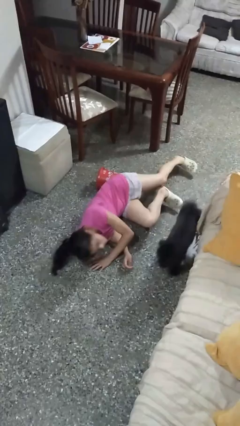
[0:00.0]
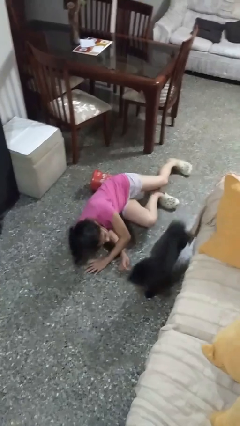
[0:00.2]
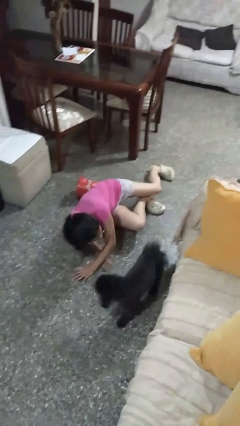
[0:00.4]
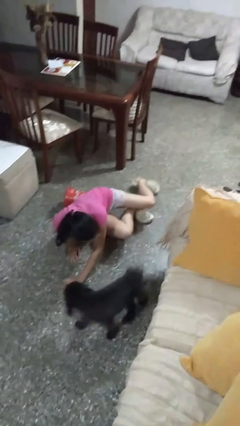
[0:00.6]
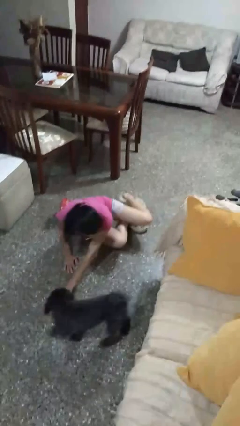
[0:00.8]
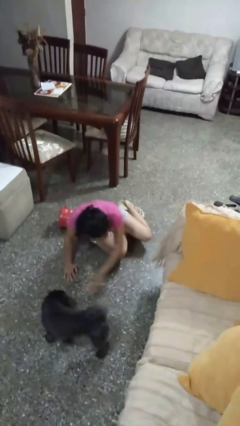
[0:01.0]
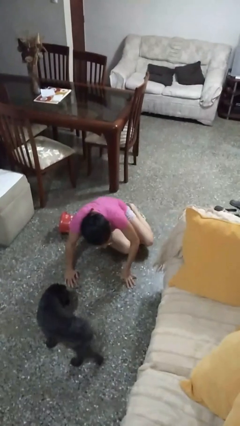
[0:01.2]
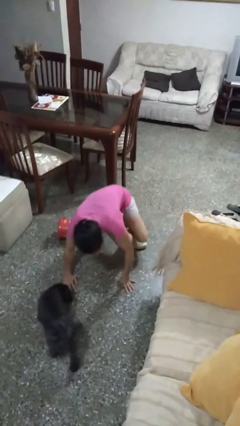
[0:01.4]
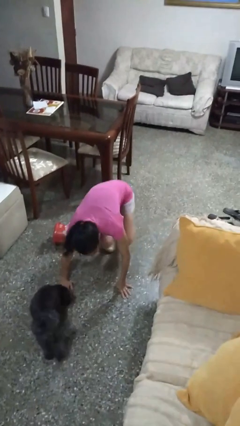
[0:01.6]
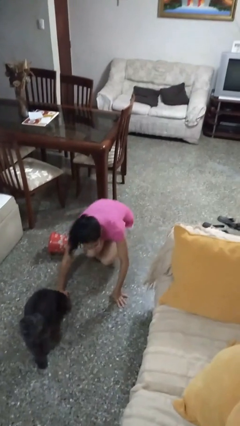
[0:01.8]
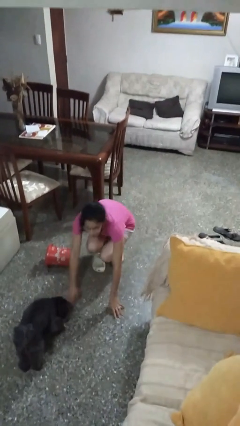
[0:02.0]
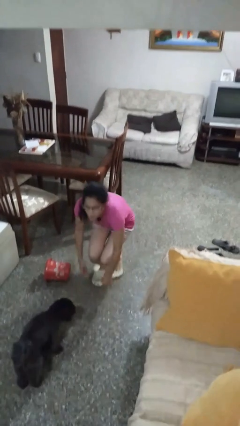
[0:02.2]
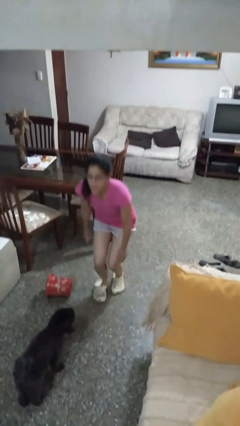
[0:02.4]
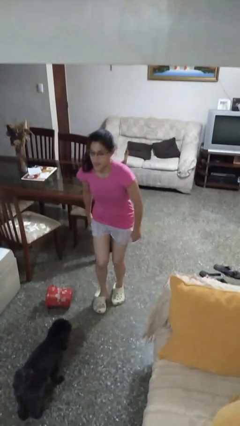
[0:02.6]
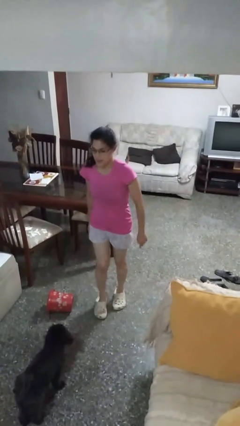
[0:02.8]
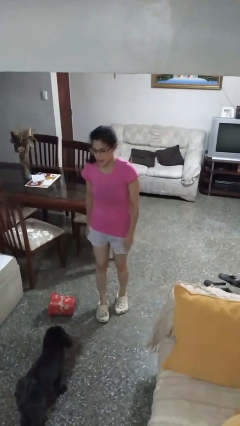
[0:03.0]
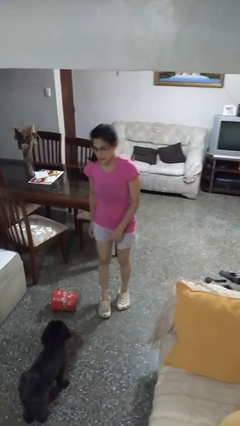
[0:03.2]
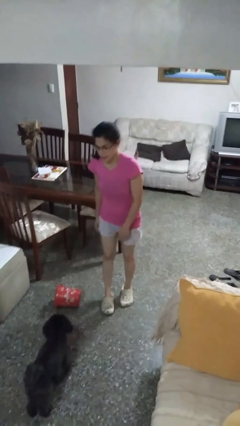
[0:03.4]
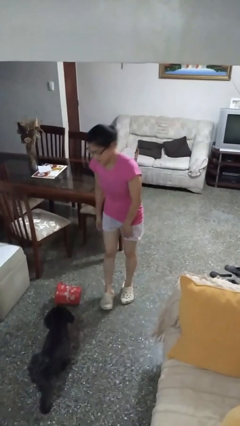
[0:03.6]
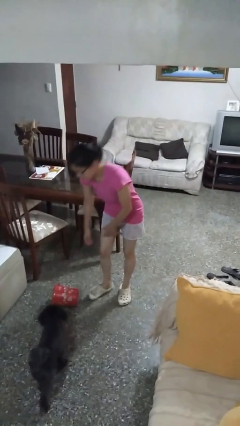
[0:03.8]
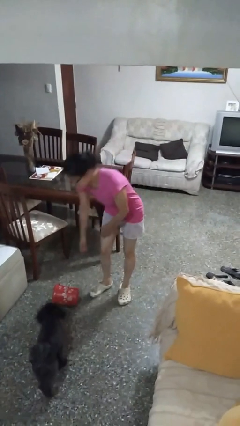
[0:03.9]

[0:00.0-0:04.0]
person stands up from floor

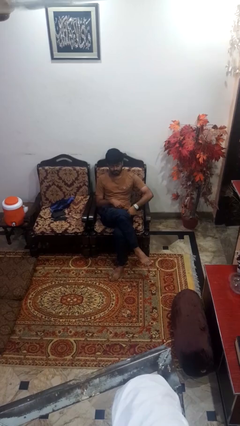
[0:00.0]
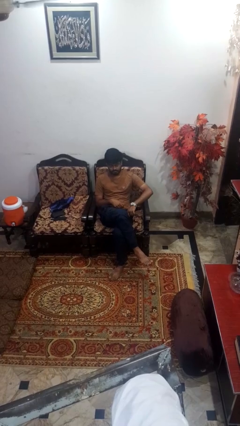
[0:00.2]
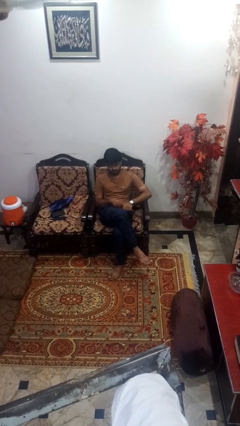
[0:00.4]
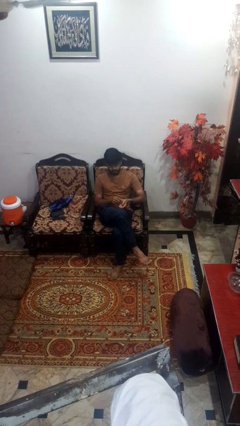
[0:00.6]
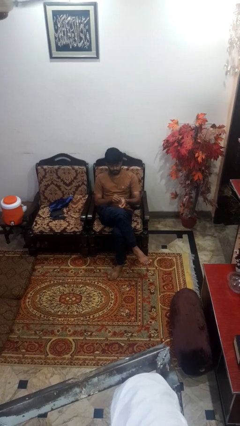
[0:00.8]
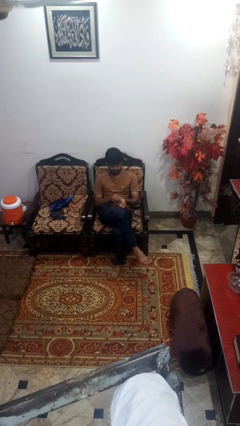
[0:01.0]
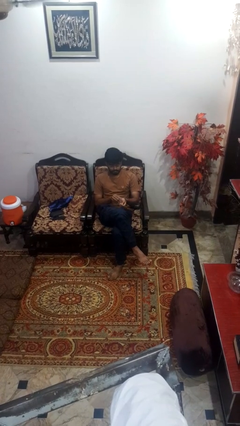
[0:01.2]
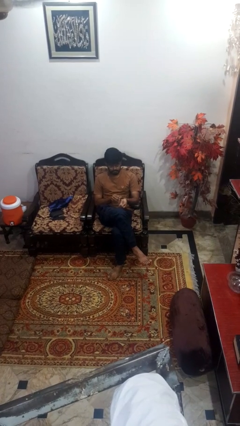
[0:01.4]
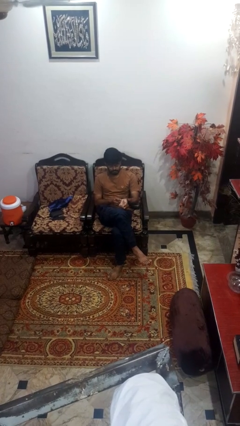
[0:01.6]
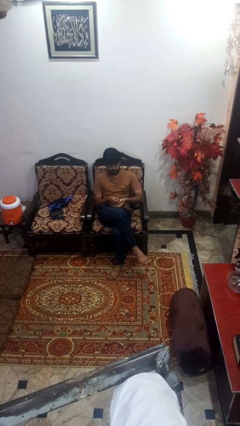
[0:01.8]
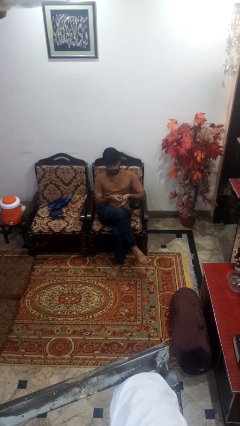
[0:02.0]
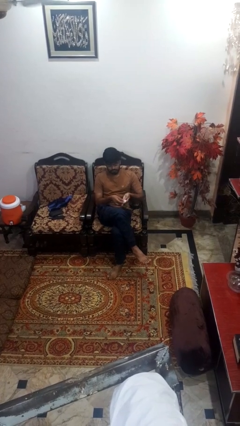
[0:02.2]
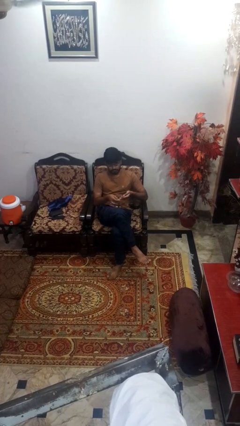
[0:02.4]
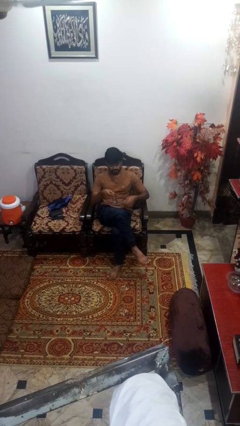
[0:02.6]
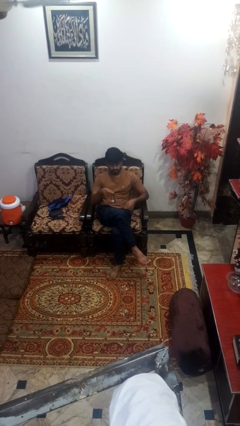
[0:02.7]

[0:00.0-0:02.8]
person takes off wristwatch

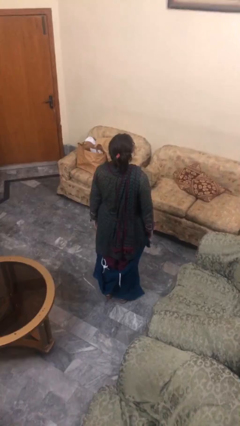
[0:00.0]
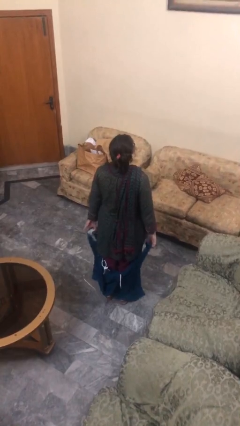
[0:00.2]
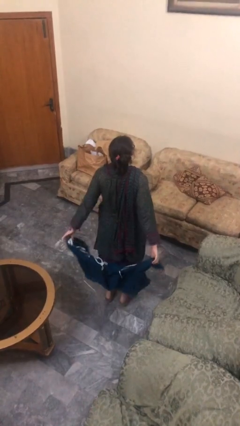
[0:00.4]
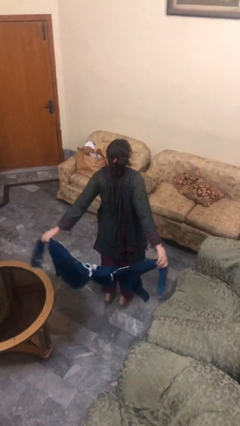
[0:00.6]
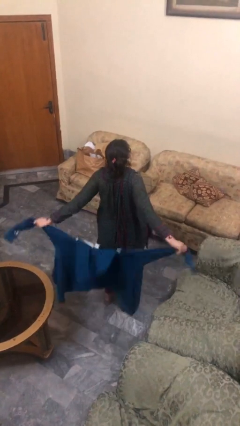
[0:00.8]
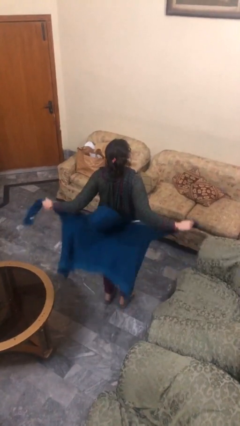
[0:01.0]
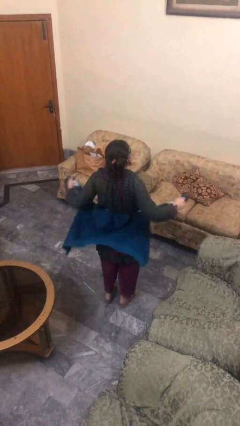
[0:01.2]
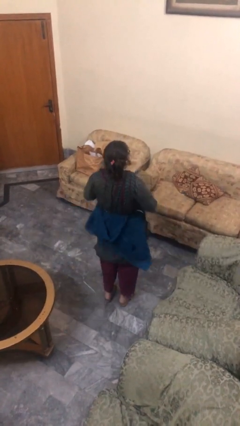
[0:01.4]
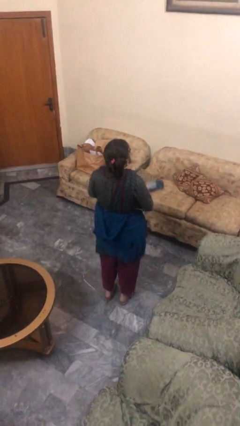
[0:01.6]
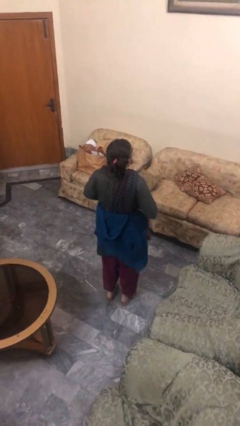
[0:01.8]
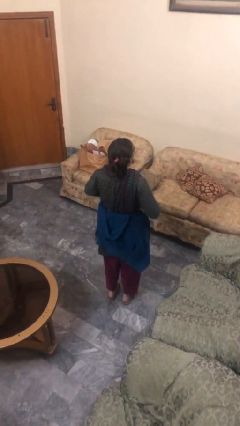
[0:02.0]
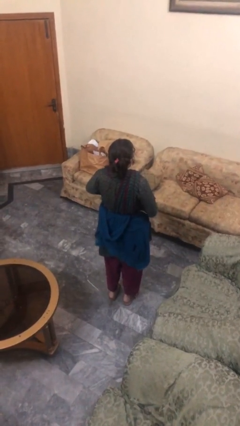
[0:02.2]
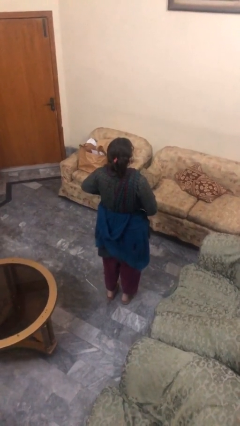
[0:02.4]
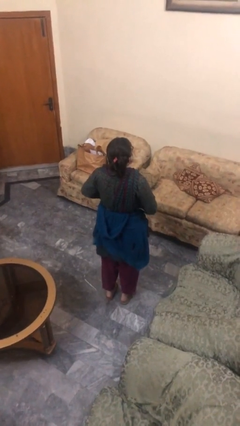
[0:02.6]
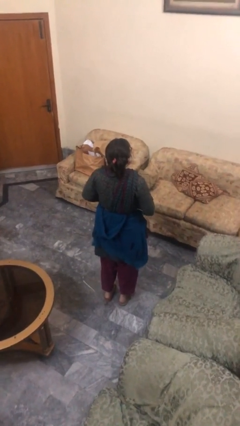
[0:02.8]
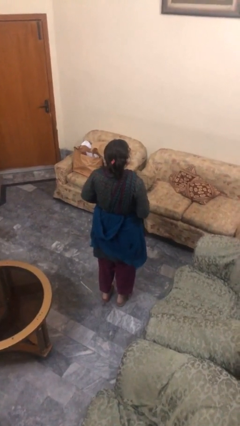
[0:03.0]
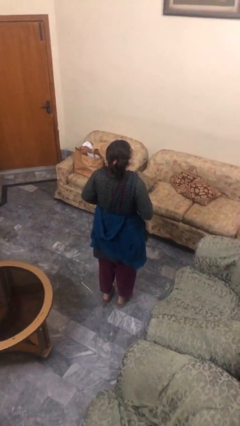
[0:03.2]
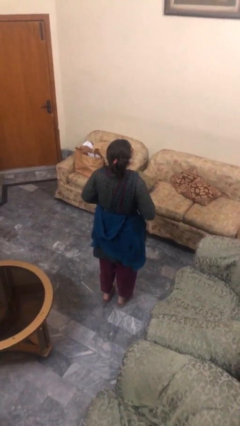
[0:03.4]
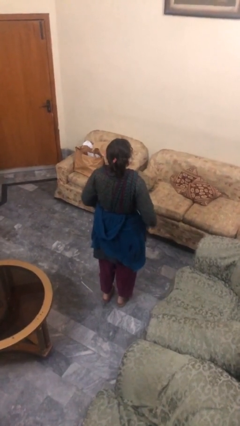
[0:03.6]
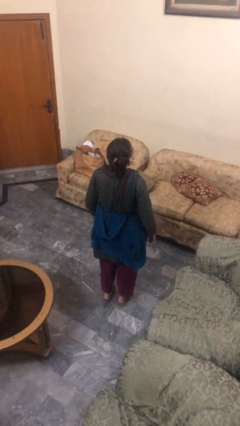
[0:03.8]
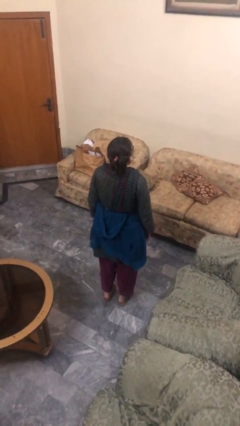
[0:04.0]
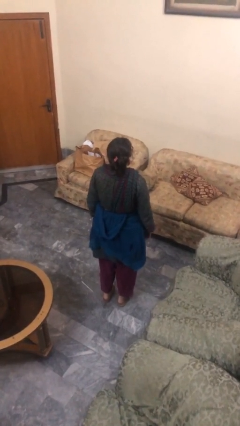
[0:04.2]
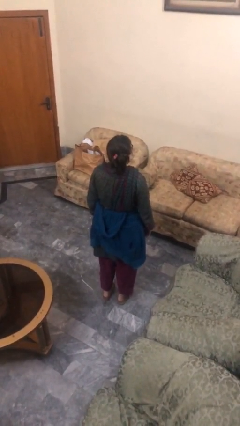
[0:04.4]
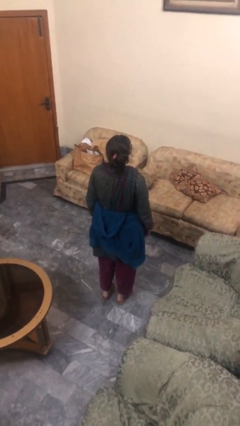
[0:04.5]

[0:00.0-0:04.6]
person ties jacket around waist

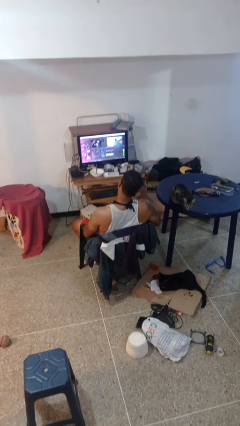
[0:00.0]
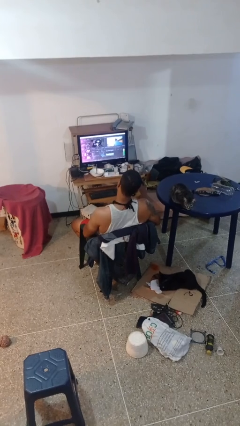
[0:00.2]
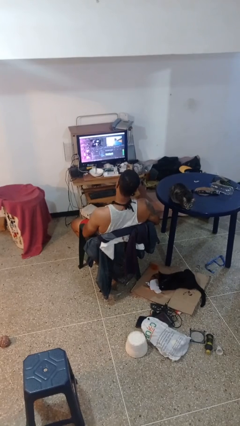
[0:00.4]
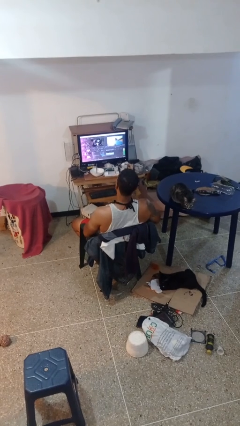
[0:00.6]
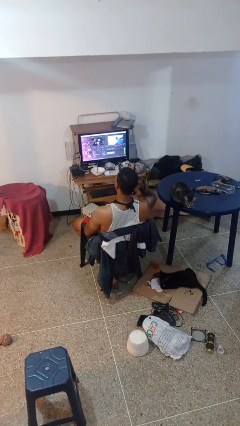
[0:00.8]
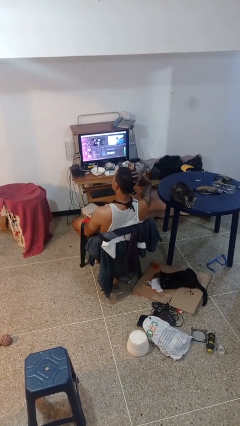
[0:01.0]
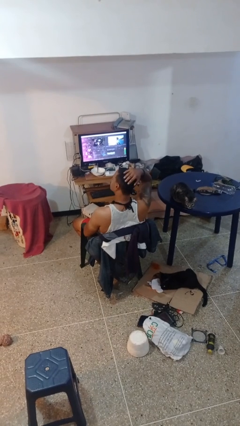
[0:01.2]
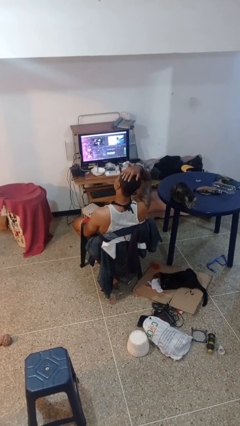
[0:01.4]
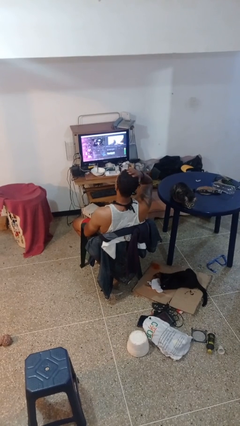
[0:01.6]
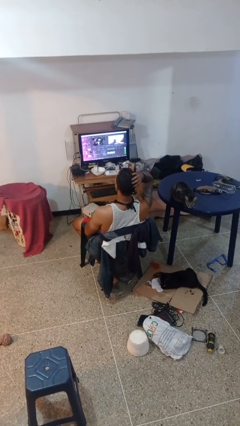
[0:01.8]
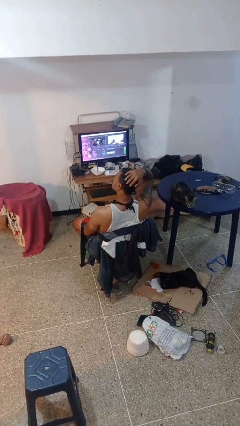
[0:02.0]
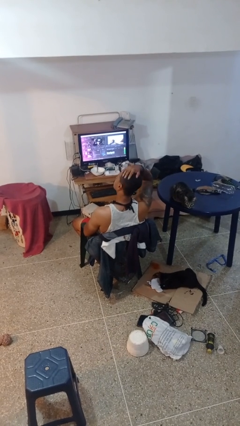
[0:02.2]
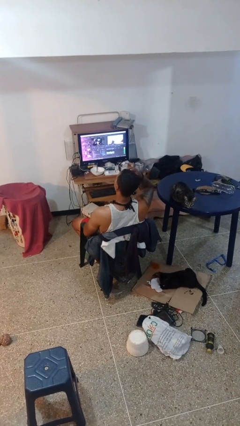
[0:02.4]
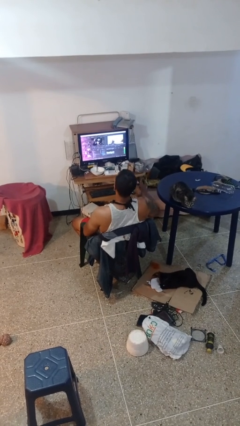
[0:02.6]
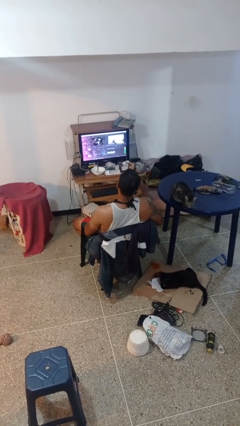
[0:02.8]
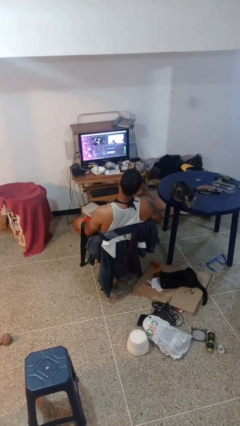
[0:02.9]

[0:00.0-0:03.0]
person strokes hair

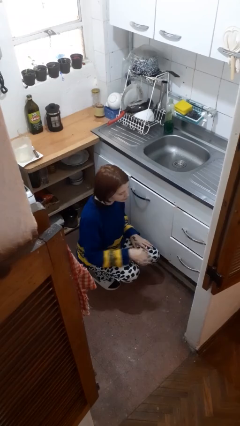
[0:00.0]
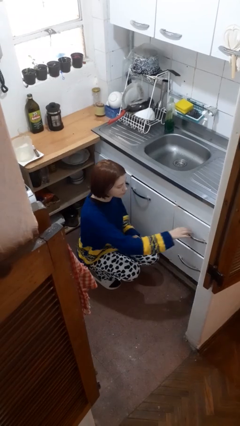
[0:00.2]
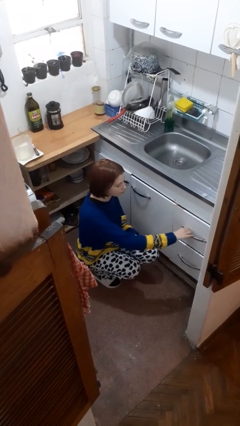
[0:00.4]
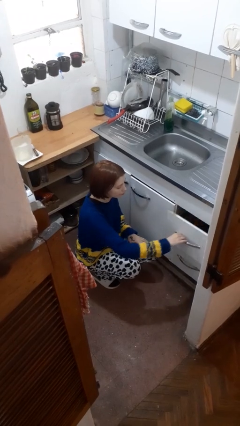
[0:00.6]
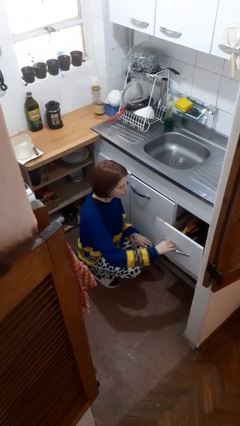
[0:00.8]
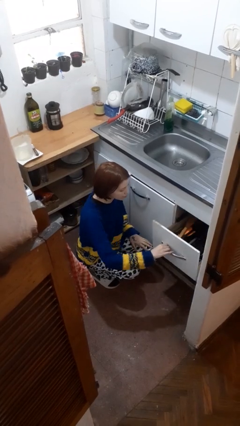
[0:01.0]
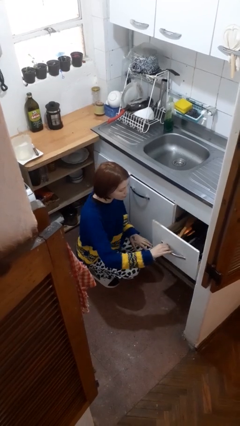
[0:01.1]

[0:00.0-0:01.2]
person opens kitchen drawer

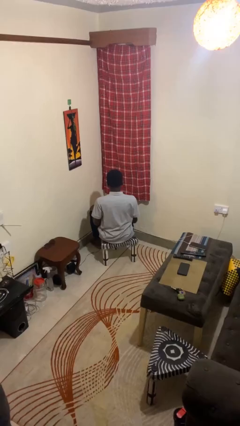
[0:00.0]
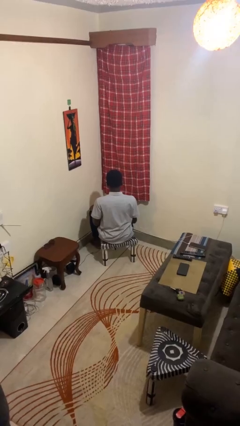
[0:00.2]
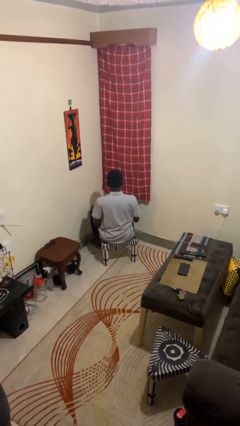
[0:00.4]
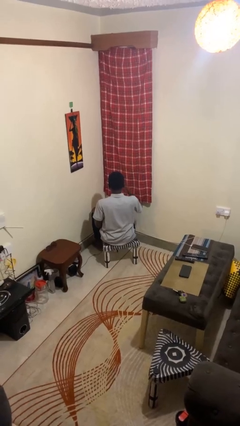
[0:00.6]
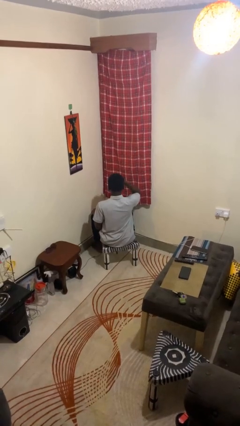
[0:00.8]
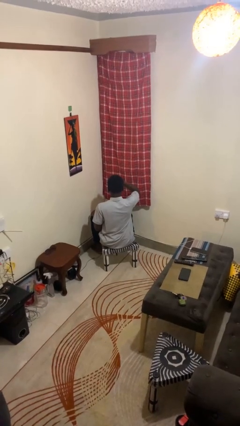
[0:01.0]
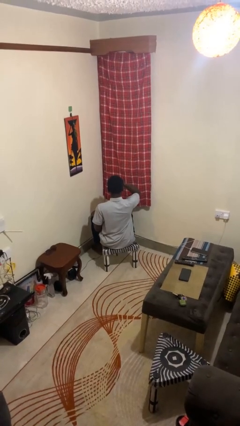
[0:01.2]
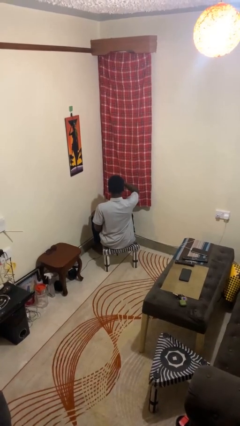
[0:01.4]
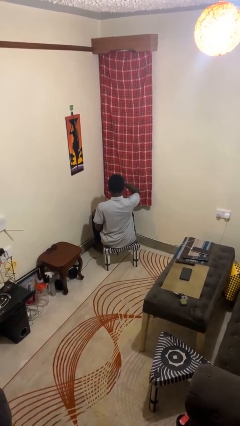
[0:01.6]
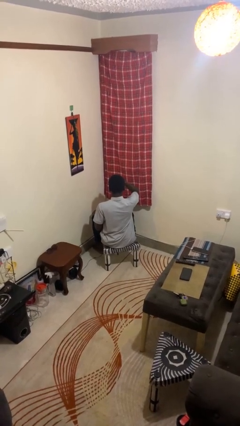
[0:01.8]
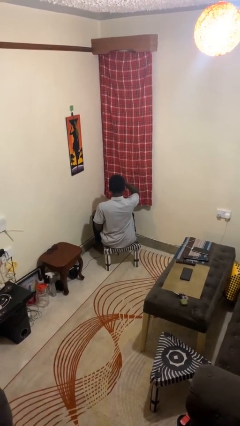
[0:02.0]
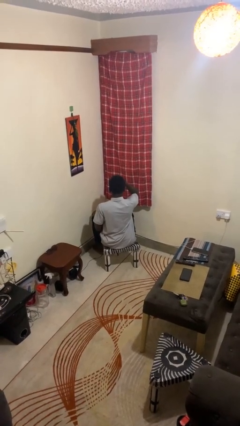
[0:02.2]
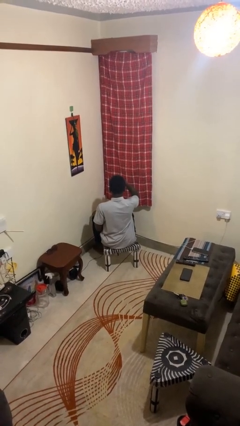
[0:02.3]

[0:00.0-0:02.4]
person scratches face
